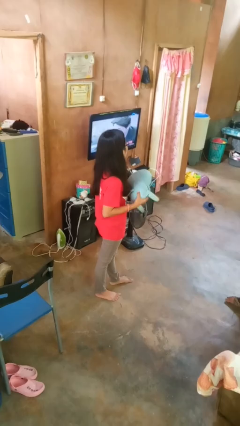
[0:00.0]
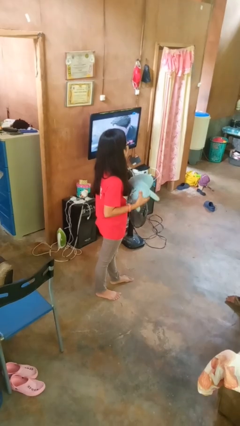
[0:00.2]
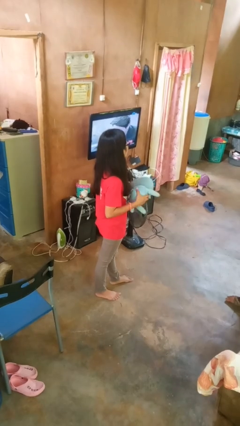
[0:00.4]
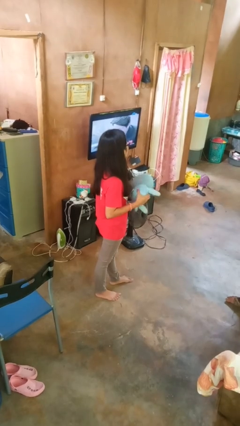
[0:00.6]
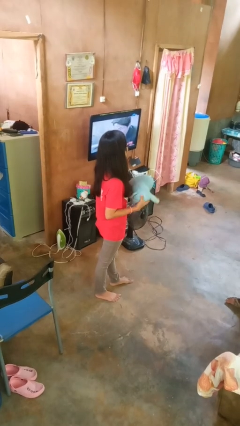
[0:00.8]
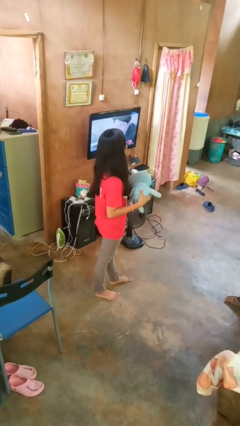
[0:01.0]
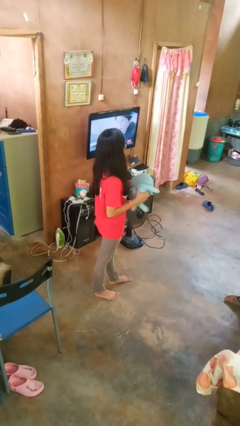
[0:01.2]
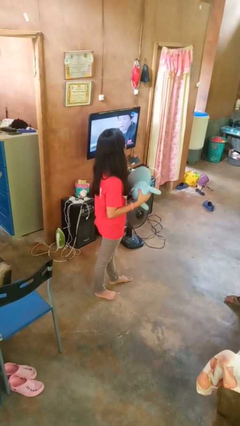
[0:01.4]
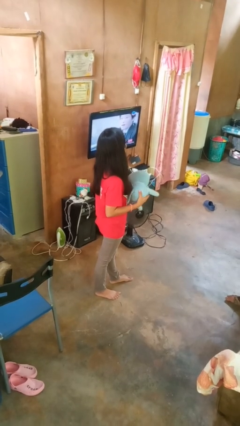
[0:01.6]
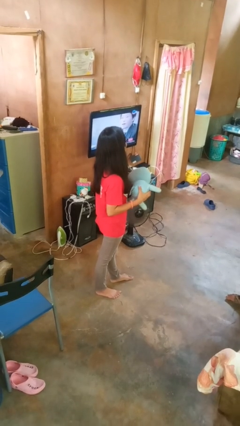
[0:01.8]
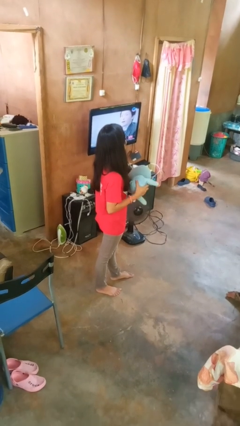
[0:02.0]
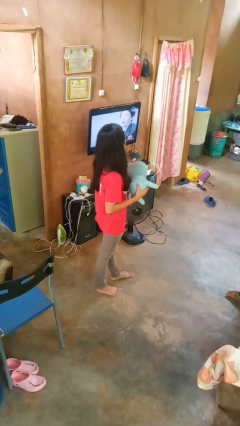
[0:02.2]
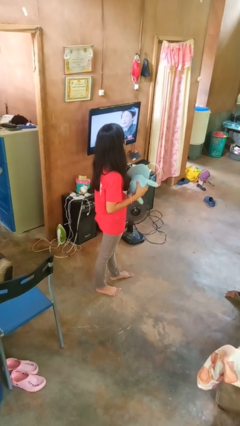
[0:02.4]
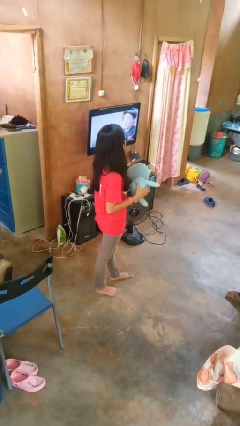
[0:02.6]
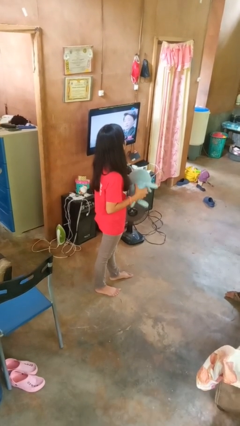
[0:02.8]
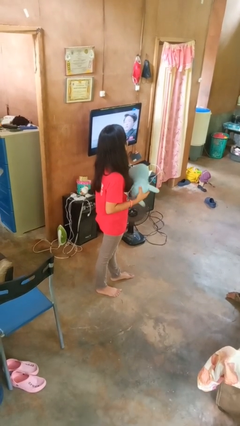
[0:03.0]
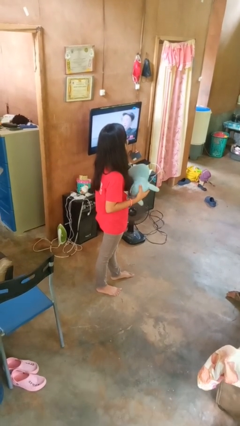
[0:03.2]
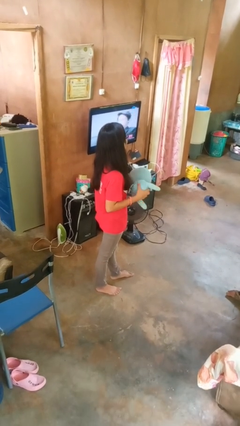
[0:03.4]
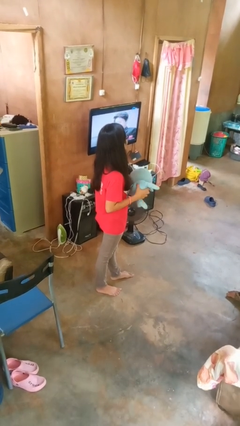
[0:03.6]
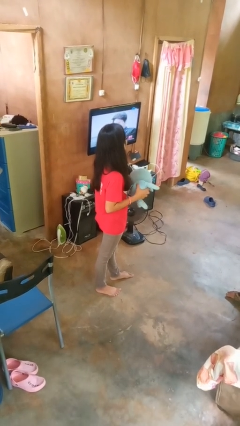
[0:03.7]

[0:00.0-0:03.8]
person squeezes object

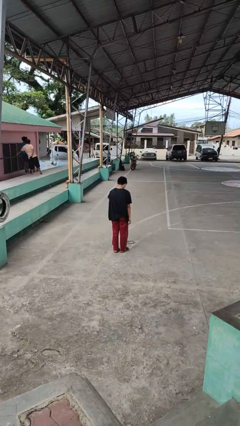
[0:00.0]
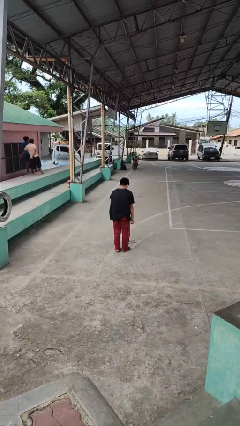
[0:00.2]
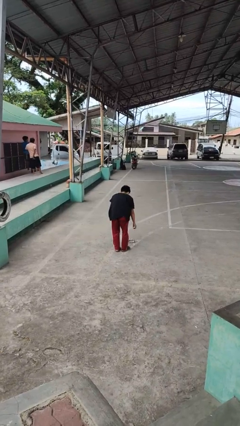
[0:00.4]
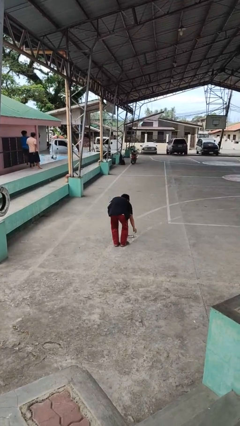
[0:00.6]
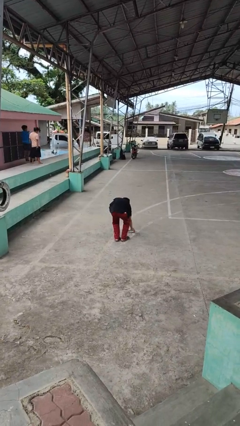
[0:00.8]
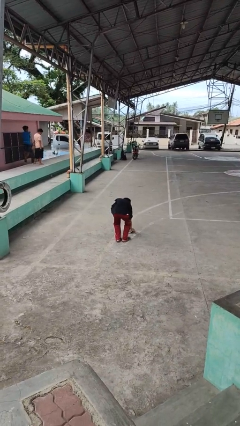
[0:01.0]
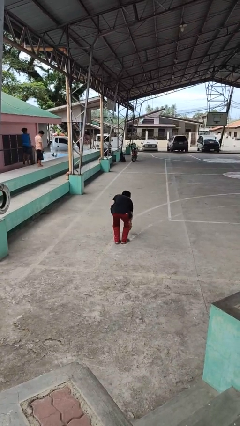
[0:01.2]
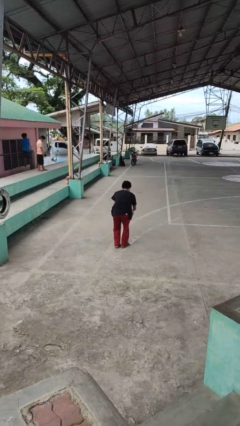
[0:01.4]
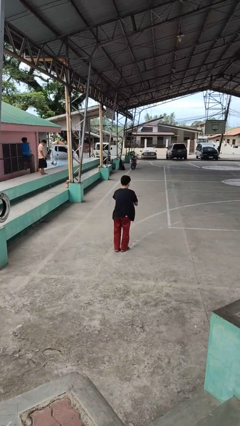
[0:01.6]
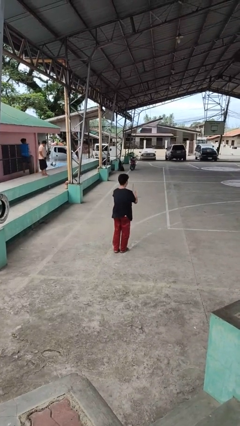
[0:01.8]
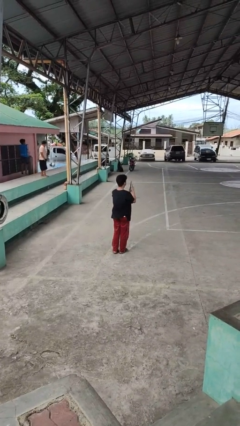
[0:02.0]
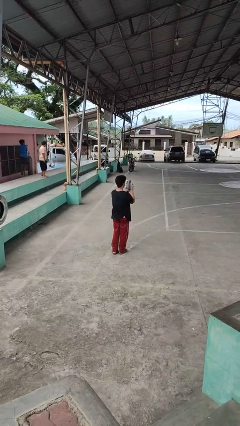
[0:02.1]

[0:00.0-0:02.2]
person picks up object from floor

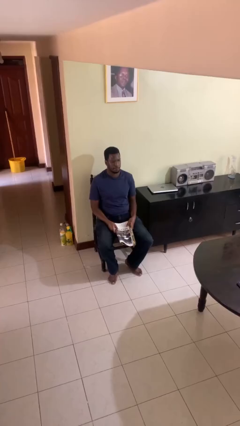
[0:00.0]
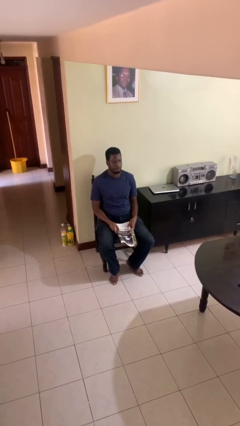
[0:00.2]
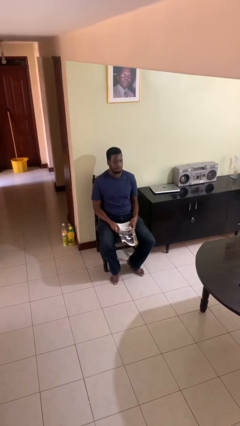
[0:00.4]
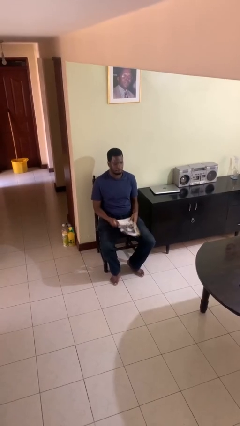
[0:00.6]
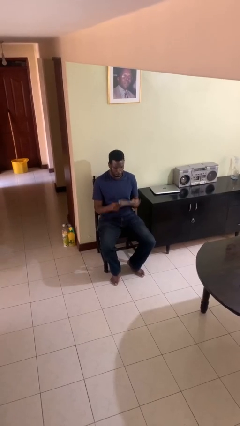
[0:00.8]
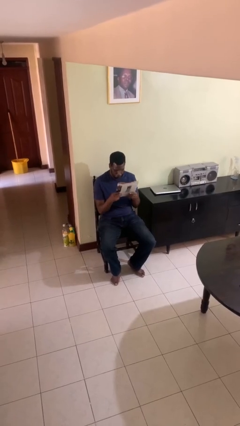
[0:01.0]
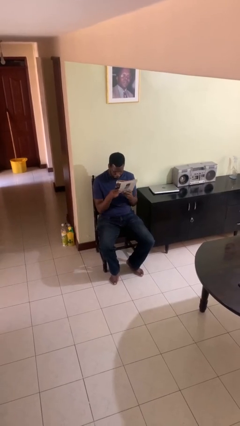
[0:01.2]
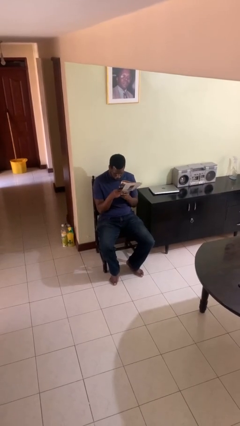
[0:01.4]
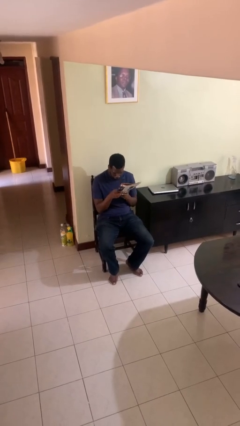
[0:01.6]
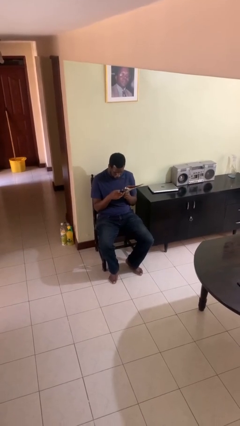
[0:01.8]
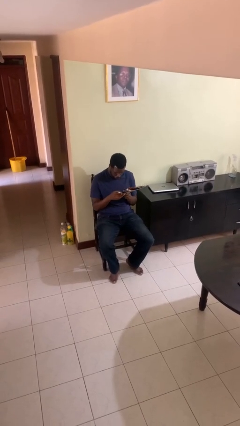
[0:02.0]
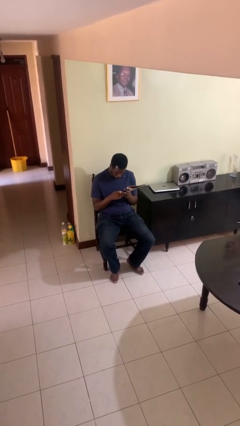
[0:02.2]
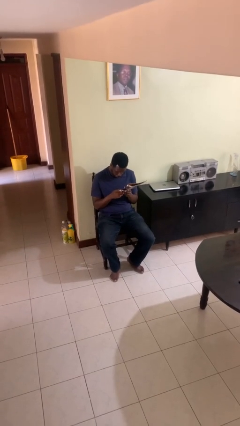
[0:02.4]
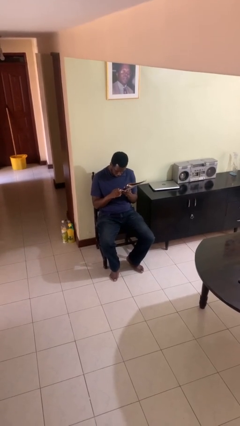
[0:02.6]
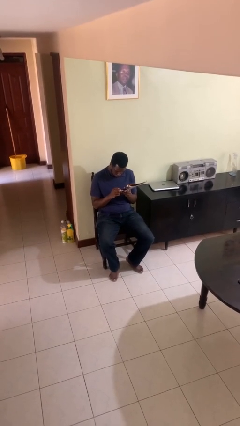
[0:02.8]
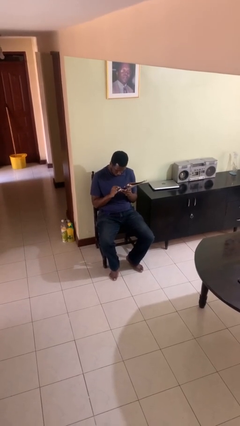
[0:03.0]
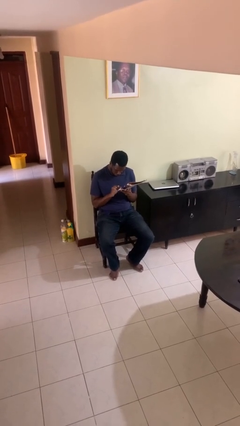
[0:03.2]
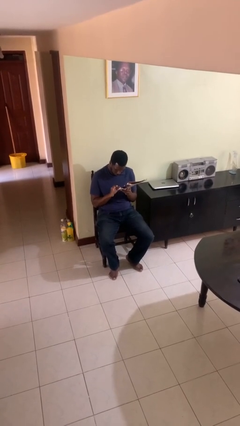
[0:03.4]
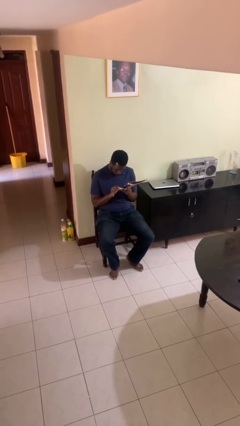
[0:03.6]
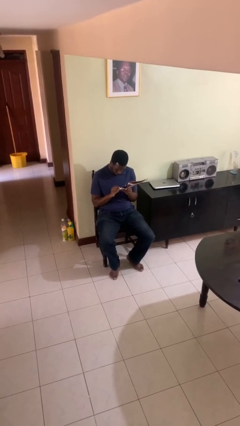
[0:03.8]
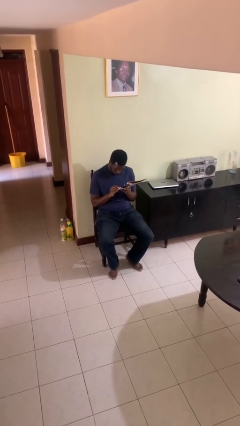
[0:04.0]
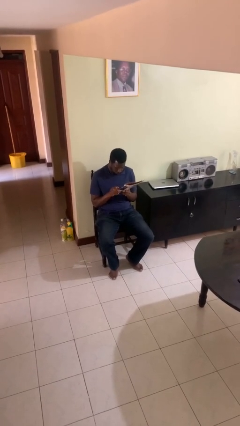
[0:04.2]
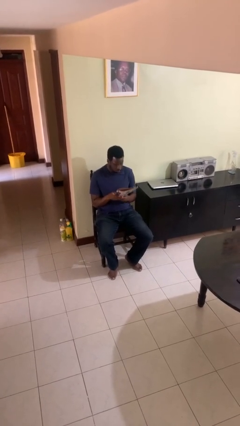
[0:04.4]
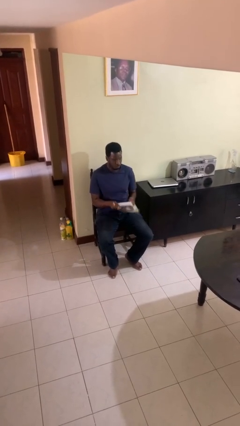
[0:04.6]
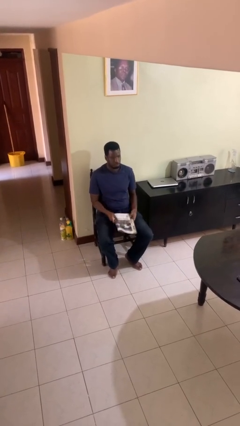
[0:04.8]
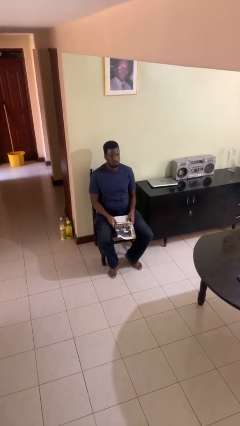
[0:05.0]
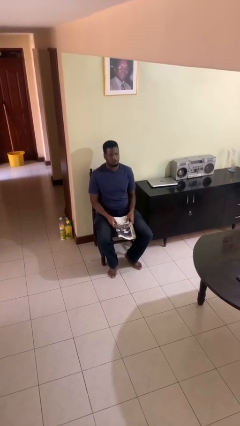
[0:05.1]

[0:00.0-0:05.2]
person reads document

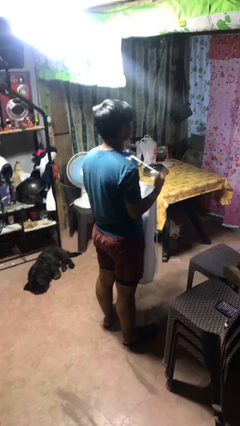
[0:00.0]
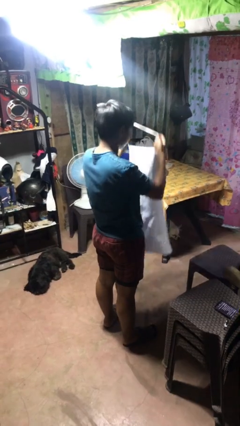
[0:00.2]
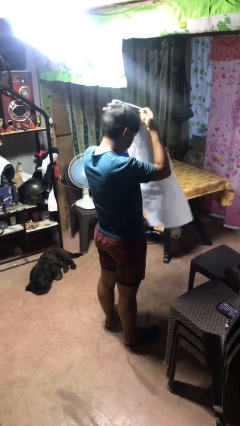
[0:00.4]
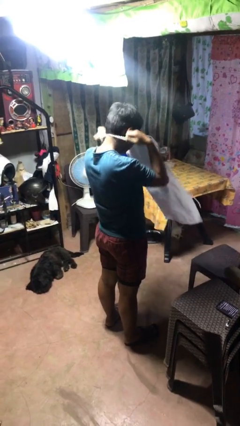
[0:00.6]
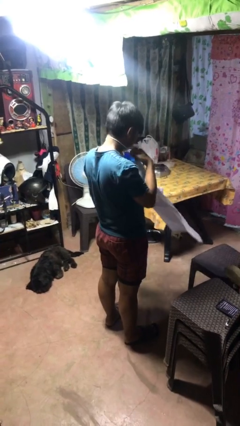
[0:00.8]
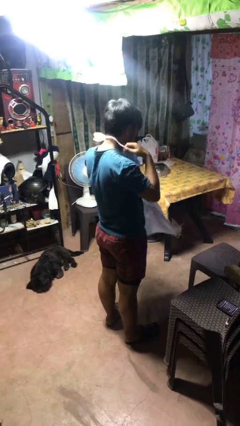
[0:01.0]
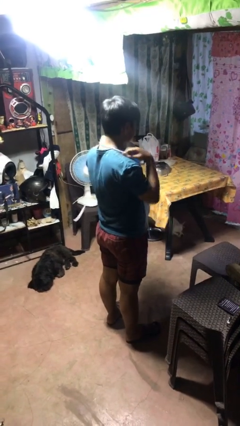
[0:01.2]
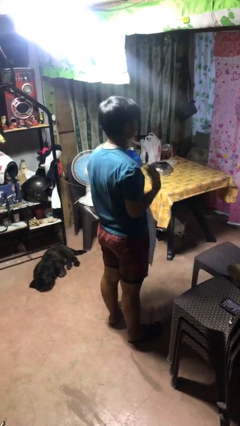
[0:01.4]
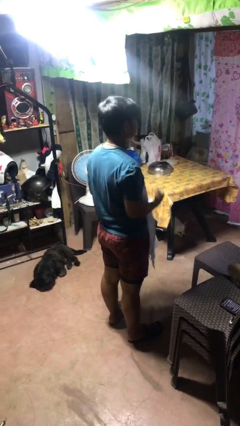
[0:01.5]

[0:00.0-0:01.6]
person puts on apron

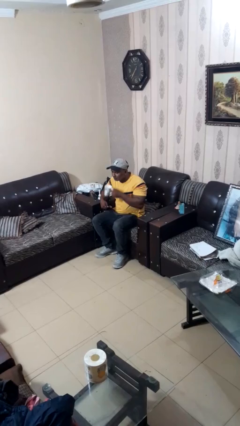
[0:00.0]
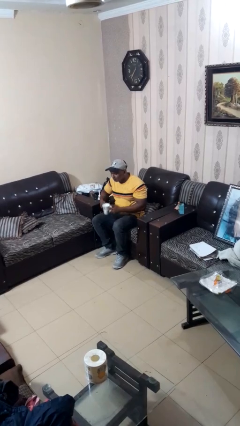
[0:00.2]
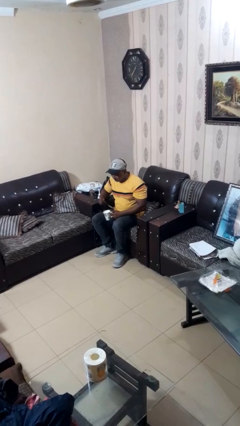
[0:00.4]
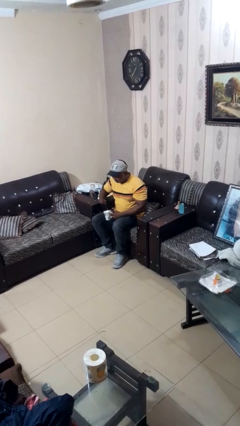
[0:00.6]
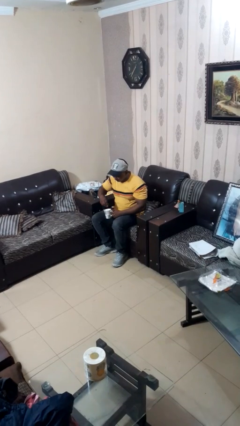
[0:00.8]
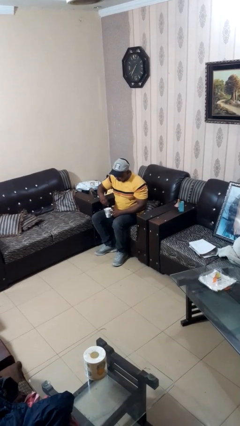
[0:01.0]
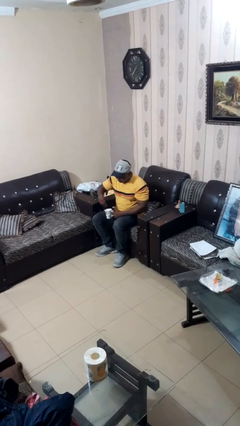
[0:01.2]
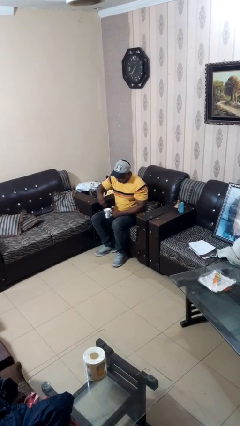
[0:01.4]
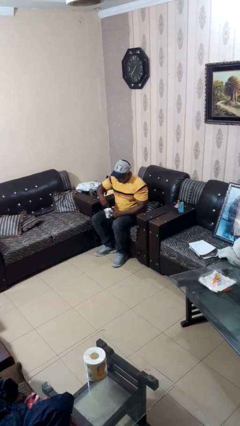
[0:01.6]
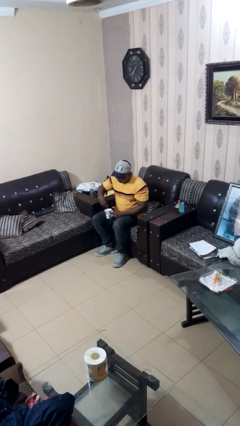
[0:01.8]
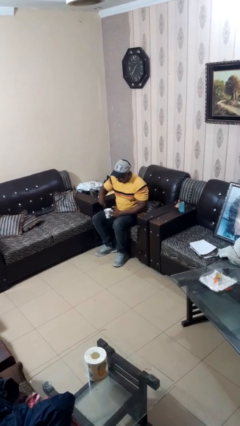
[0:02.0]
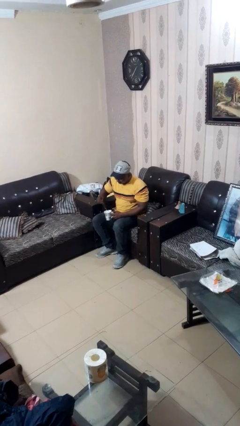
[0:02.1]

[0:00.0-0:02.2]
person stirs mug

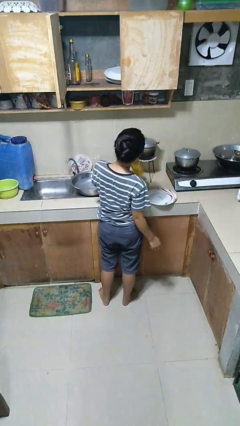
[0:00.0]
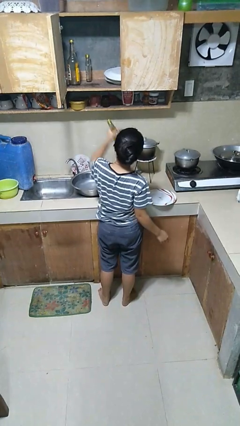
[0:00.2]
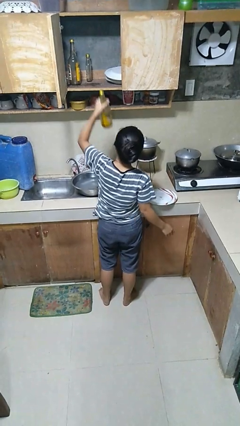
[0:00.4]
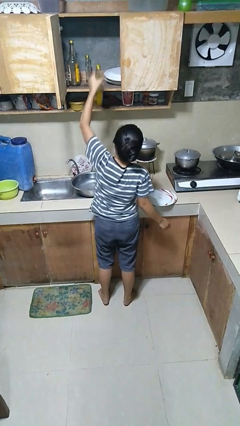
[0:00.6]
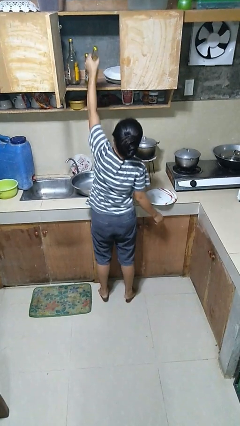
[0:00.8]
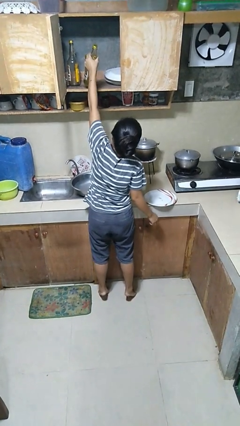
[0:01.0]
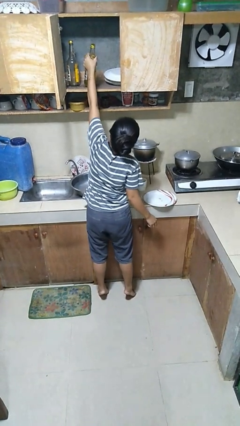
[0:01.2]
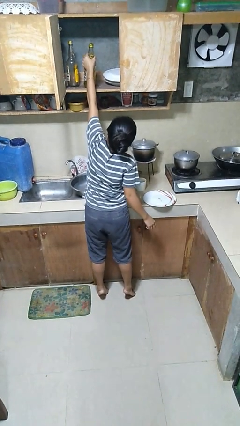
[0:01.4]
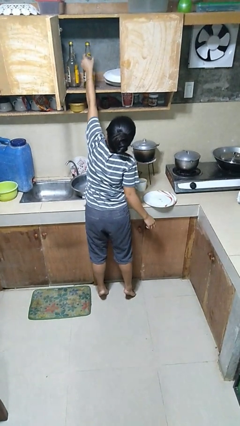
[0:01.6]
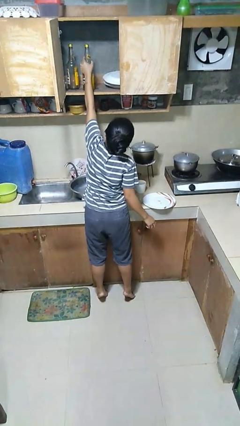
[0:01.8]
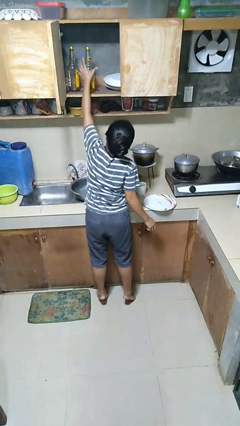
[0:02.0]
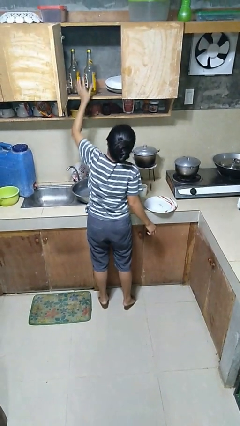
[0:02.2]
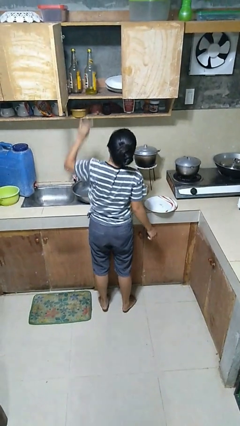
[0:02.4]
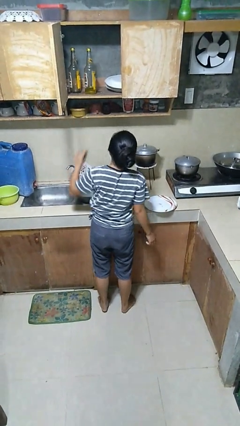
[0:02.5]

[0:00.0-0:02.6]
person puts object in cabinet
